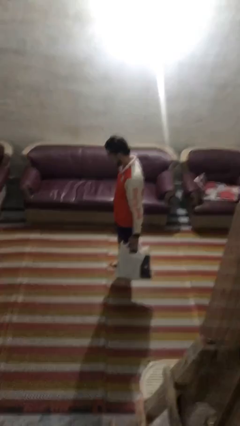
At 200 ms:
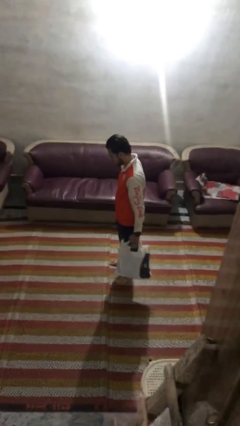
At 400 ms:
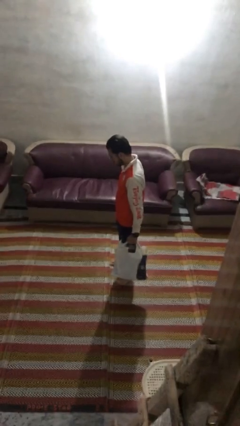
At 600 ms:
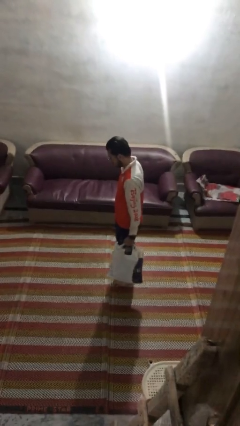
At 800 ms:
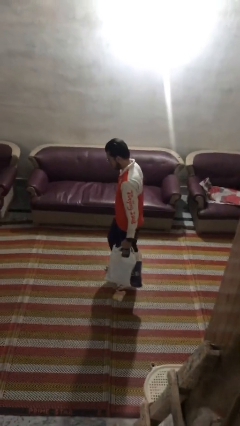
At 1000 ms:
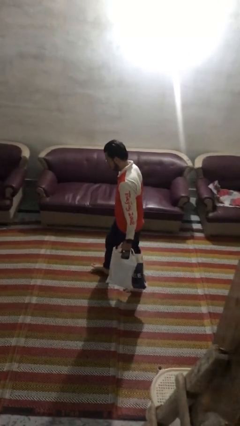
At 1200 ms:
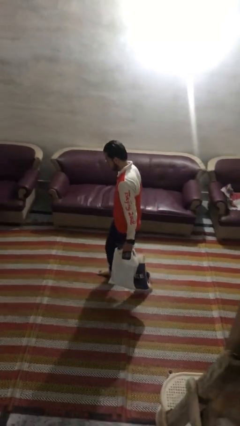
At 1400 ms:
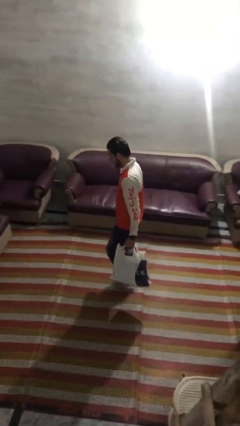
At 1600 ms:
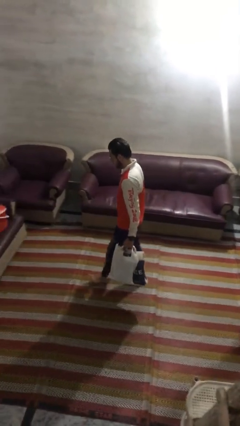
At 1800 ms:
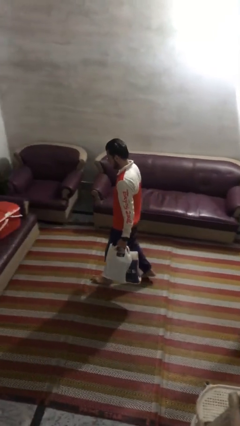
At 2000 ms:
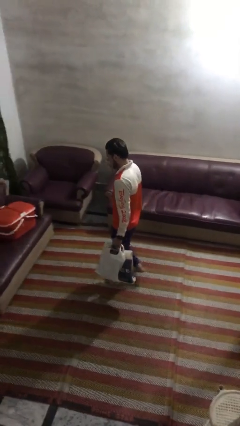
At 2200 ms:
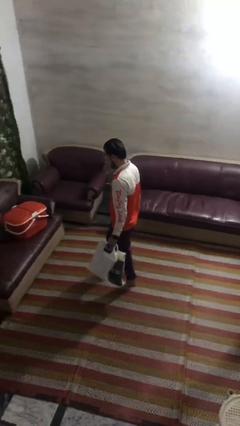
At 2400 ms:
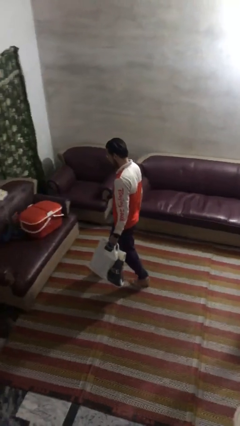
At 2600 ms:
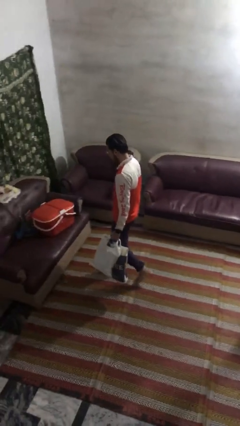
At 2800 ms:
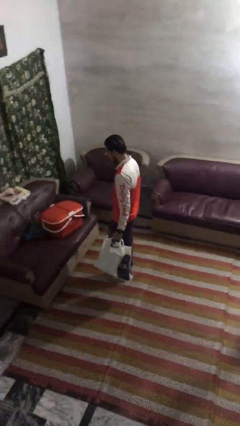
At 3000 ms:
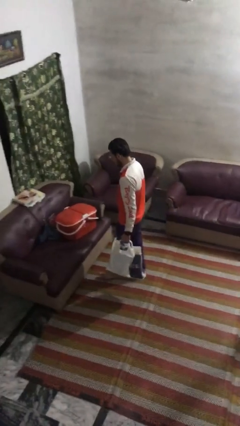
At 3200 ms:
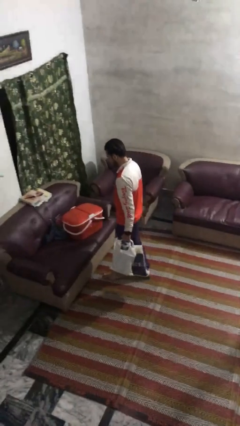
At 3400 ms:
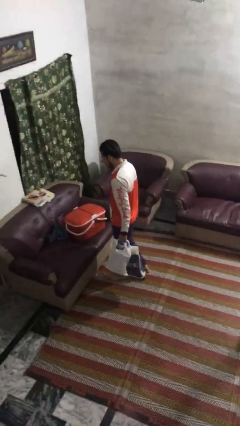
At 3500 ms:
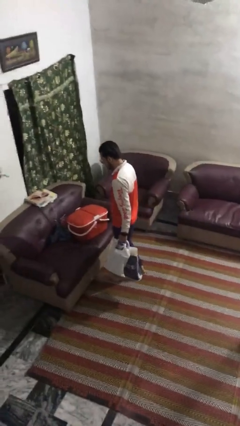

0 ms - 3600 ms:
person carries groceries

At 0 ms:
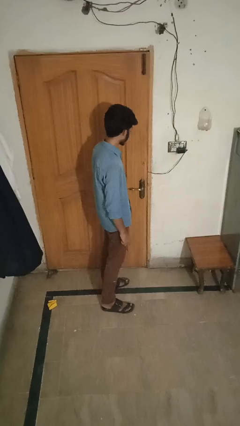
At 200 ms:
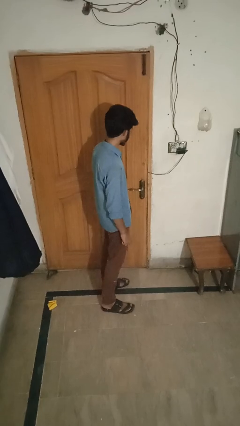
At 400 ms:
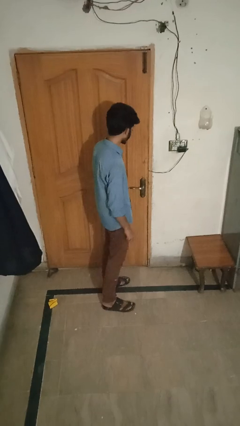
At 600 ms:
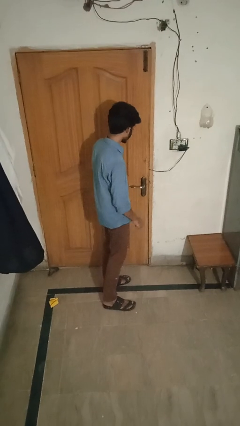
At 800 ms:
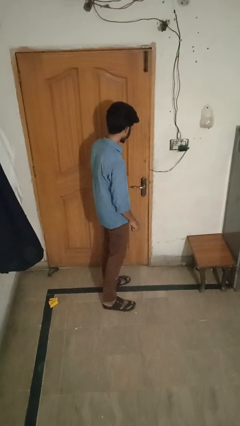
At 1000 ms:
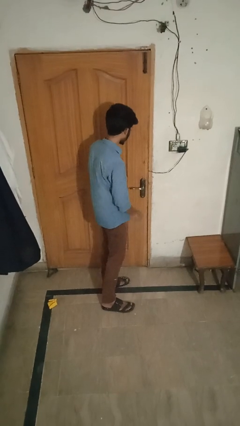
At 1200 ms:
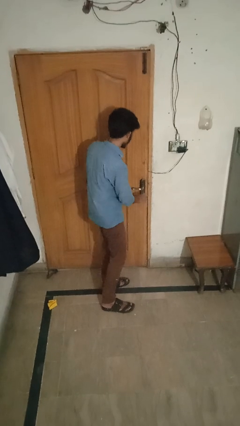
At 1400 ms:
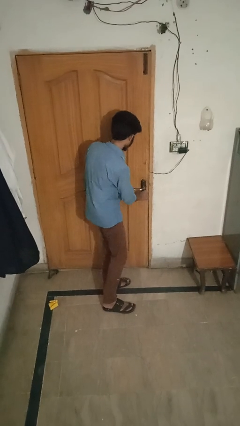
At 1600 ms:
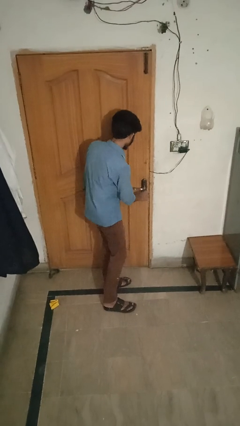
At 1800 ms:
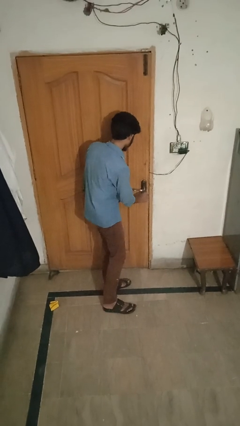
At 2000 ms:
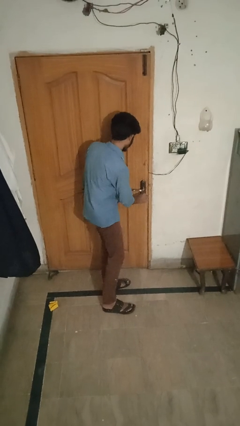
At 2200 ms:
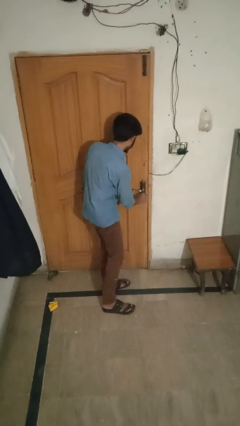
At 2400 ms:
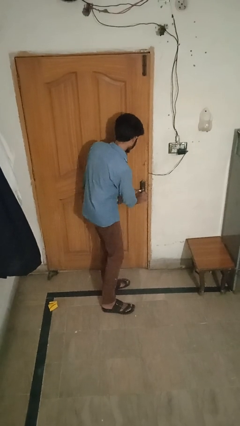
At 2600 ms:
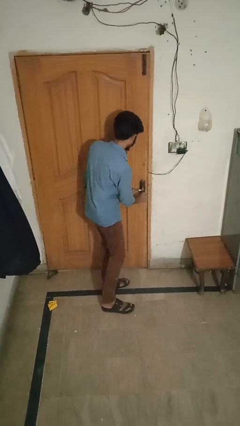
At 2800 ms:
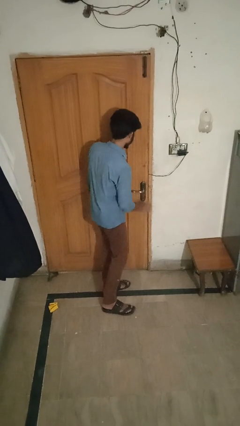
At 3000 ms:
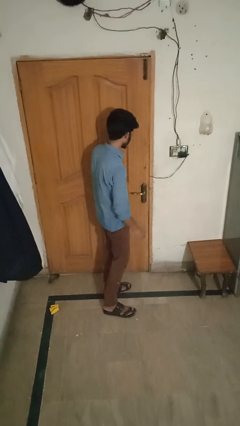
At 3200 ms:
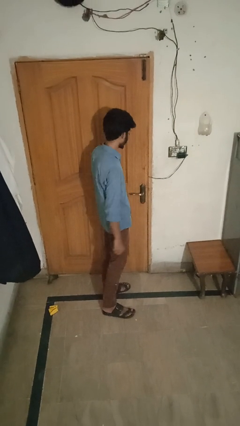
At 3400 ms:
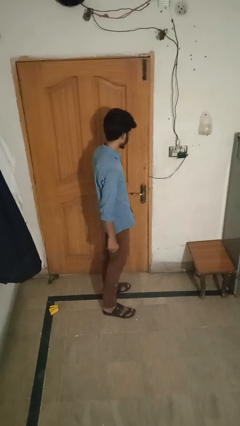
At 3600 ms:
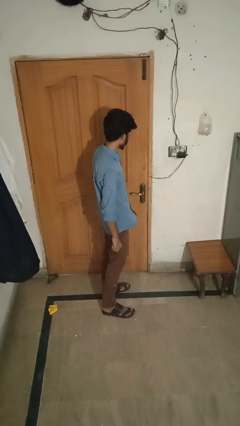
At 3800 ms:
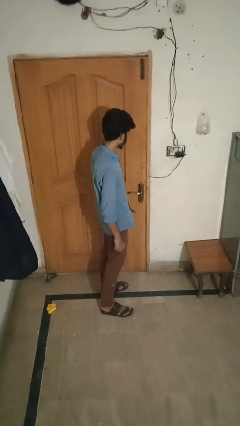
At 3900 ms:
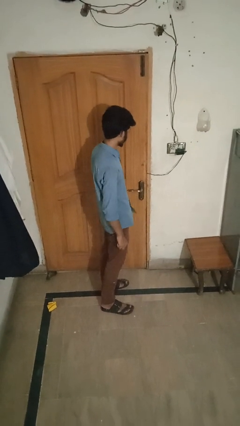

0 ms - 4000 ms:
person unlocks door with keys

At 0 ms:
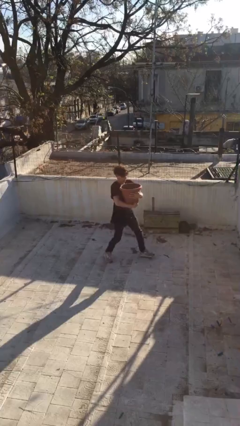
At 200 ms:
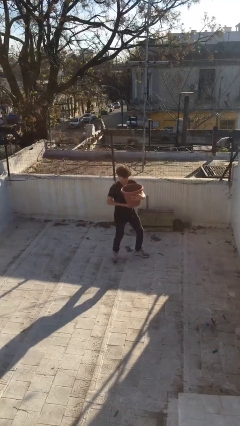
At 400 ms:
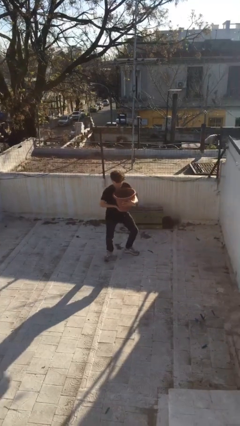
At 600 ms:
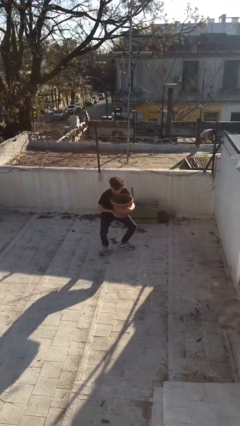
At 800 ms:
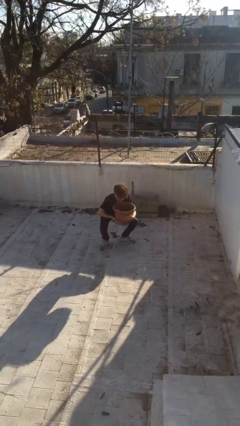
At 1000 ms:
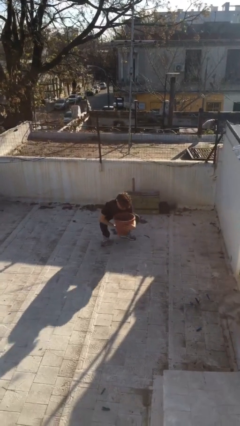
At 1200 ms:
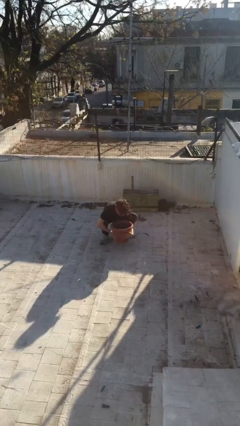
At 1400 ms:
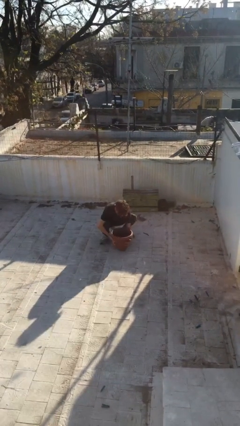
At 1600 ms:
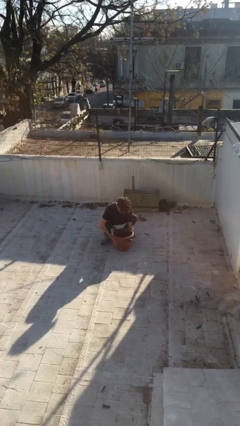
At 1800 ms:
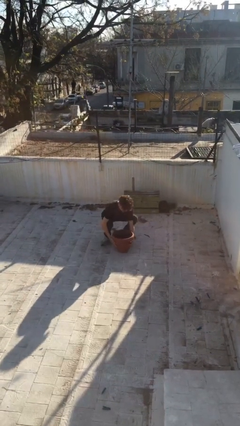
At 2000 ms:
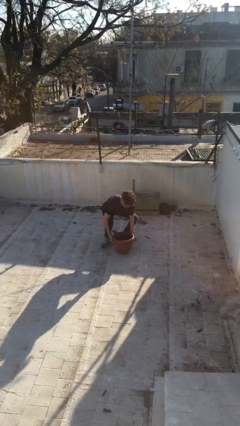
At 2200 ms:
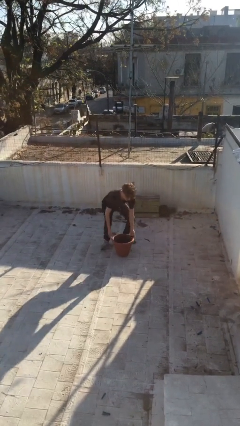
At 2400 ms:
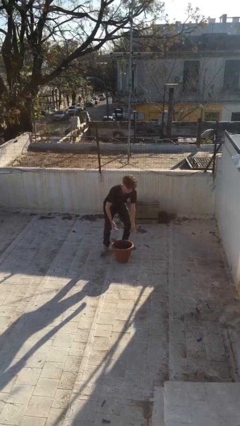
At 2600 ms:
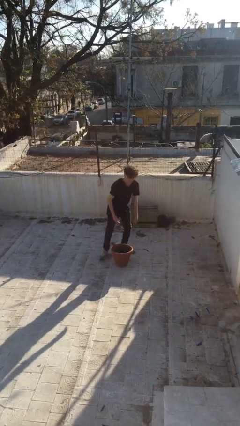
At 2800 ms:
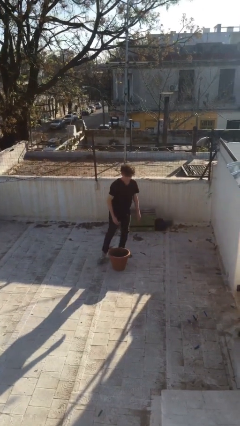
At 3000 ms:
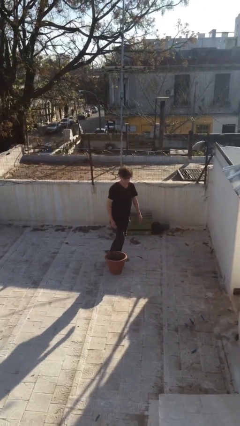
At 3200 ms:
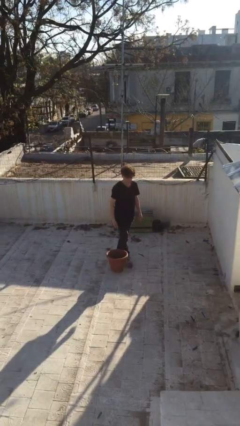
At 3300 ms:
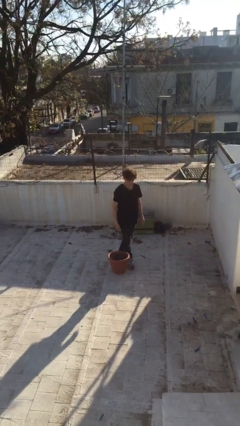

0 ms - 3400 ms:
person puts down object on floor

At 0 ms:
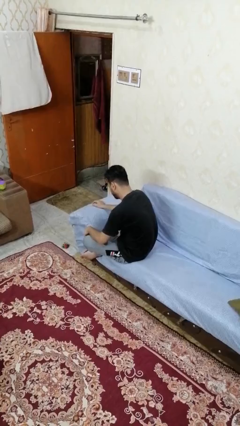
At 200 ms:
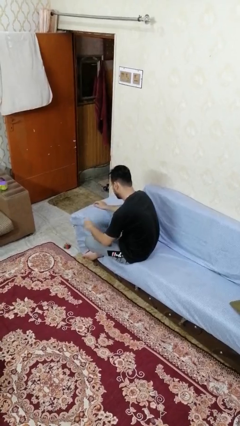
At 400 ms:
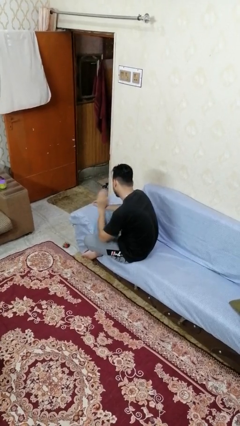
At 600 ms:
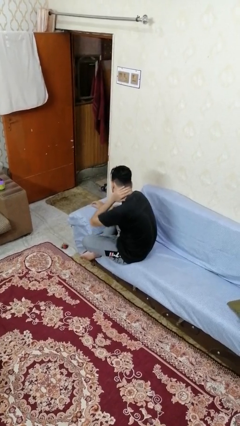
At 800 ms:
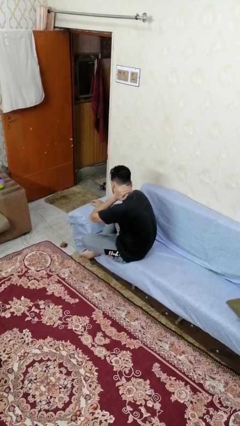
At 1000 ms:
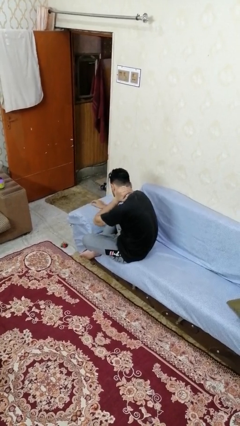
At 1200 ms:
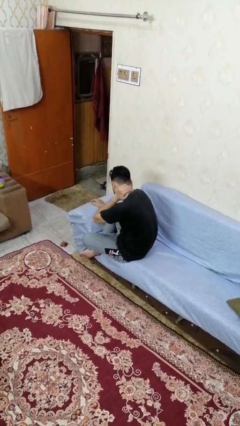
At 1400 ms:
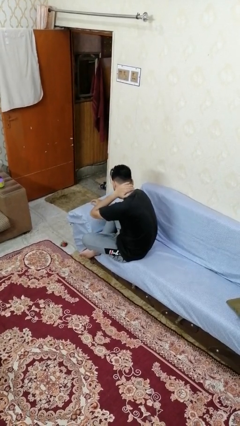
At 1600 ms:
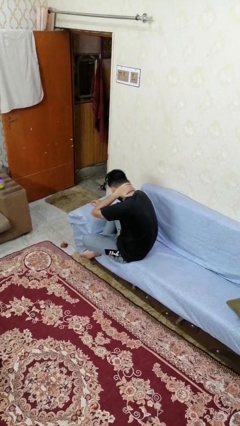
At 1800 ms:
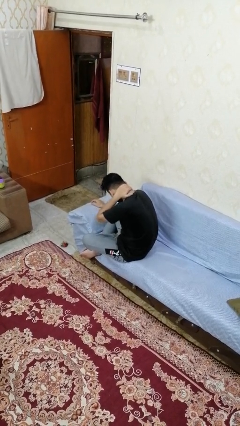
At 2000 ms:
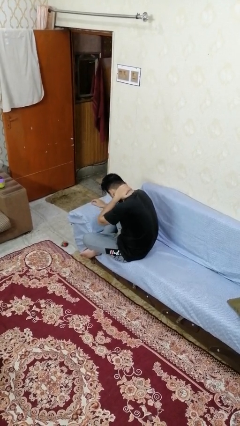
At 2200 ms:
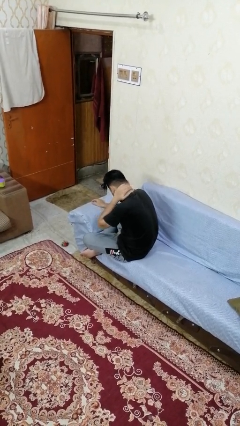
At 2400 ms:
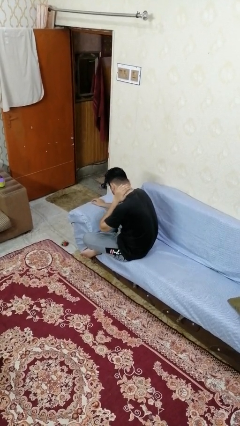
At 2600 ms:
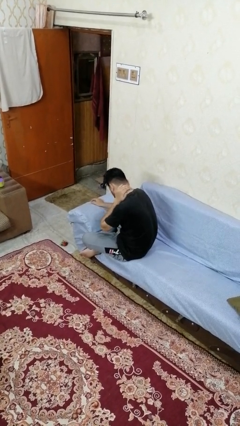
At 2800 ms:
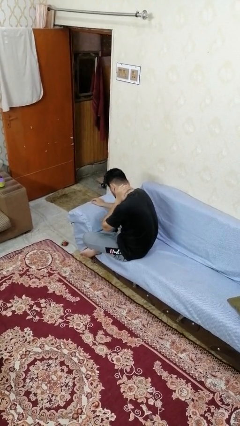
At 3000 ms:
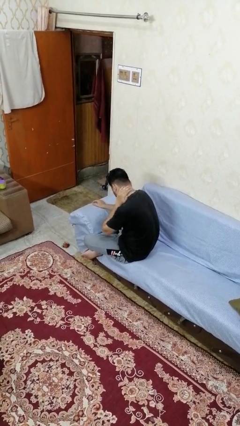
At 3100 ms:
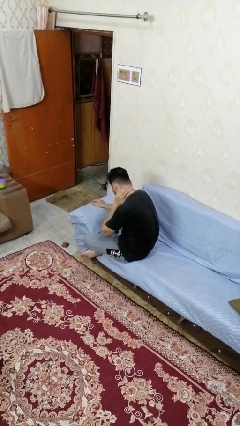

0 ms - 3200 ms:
person rubs neck

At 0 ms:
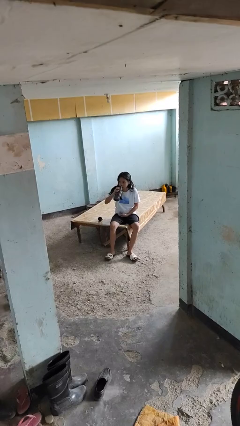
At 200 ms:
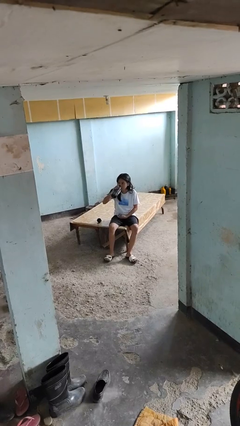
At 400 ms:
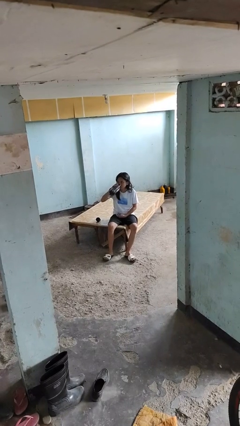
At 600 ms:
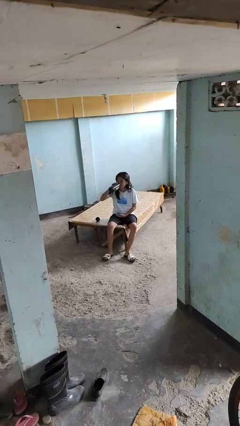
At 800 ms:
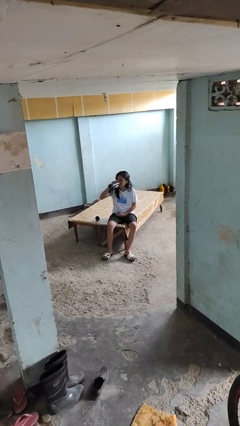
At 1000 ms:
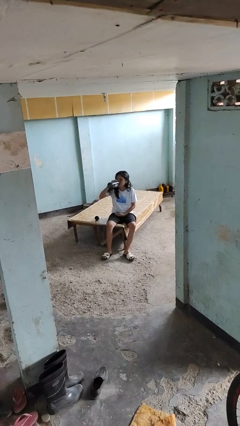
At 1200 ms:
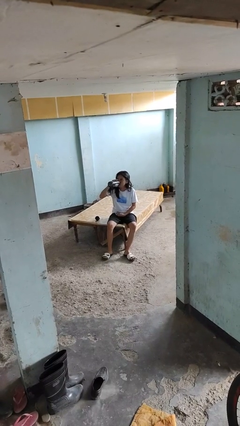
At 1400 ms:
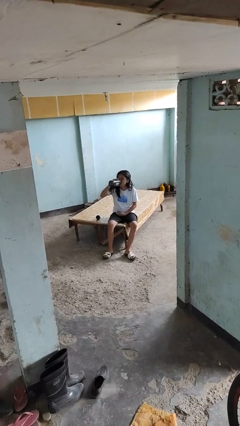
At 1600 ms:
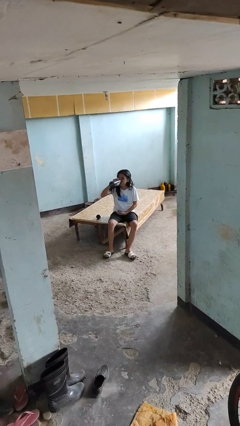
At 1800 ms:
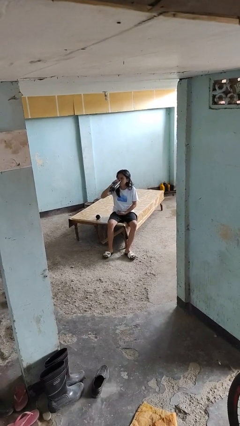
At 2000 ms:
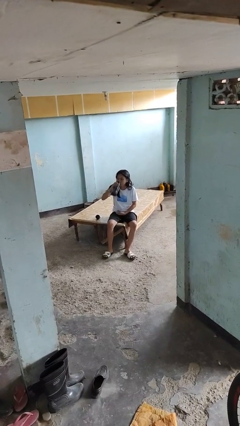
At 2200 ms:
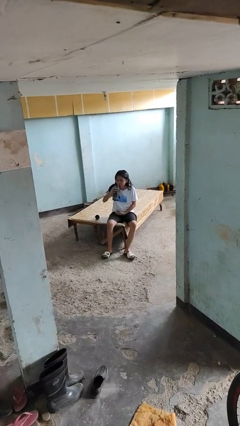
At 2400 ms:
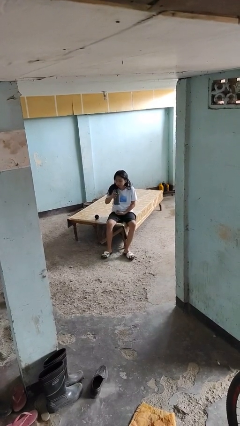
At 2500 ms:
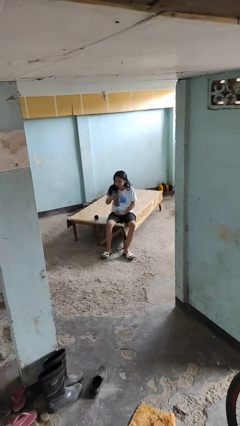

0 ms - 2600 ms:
person drinks from bottle

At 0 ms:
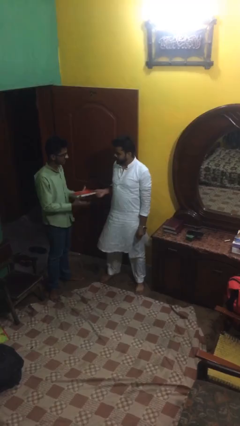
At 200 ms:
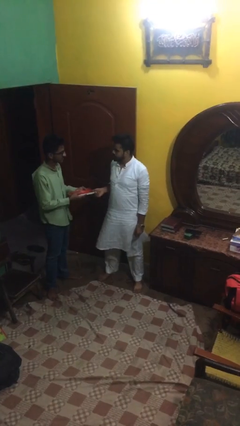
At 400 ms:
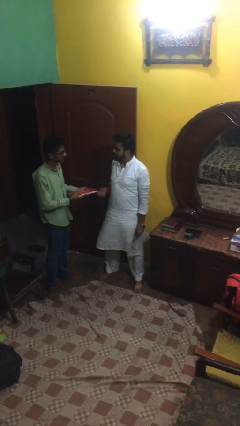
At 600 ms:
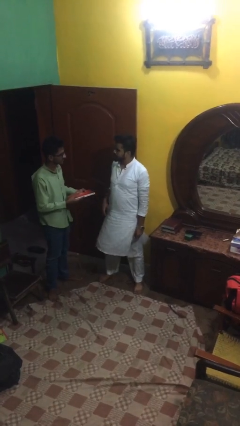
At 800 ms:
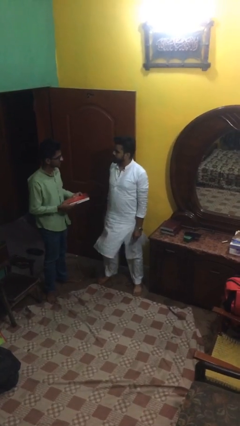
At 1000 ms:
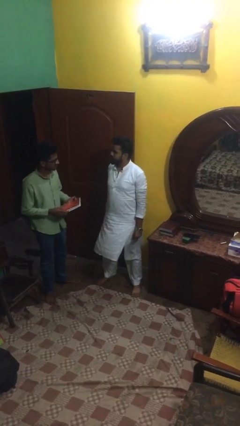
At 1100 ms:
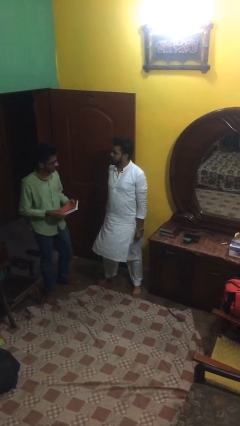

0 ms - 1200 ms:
person transfers object to person
